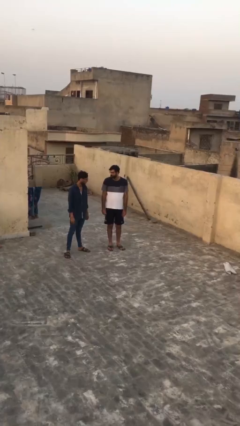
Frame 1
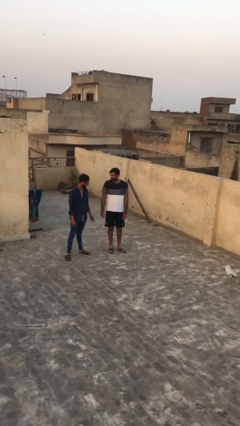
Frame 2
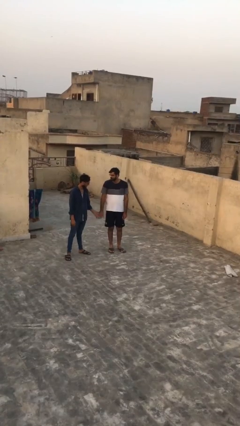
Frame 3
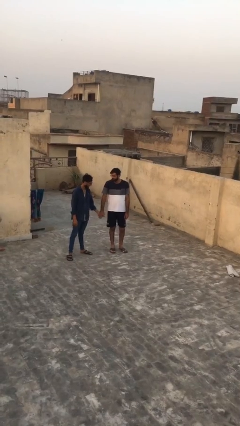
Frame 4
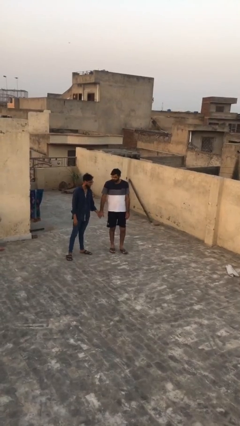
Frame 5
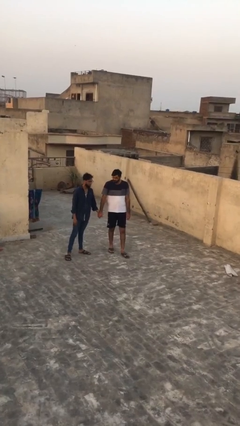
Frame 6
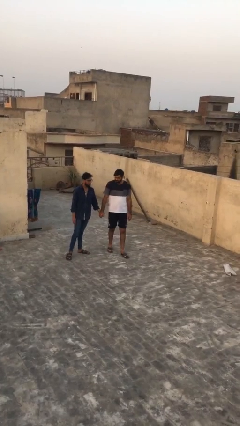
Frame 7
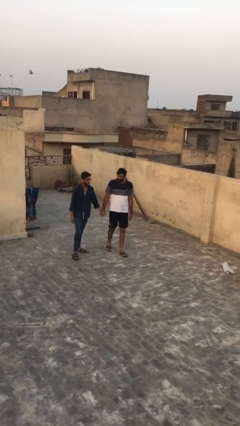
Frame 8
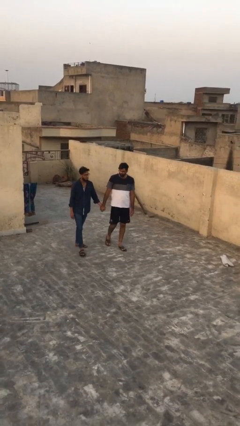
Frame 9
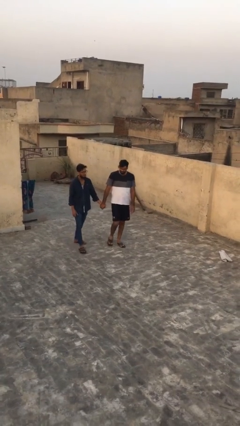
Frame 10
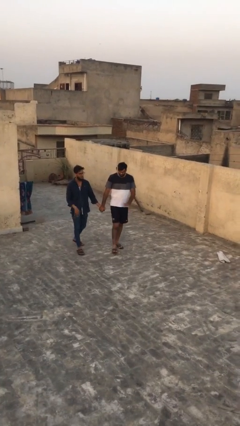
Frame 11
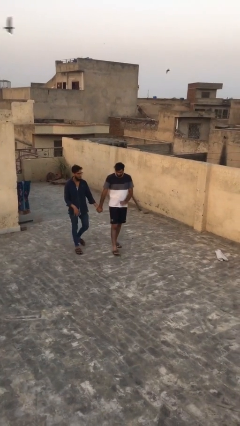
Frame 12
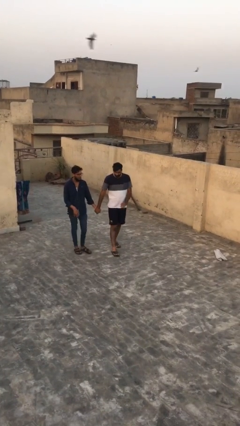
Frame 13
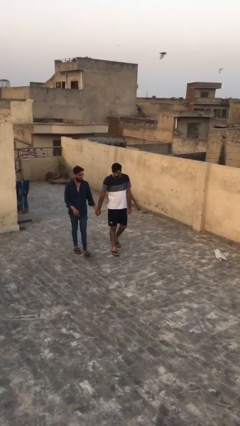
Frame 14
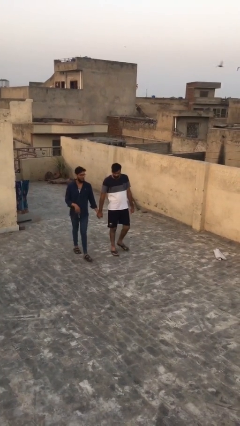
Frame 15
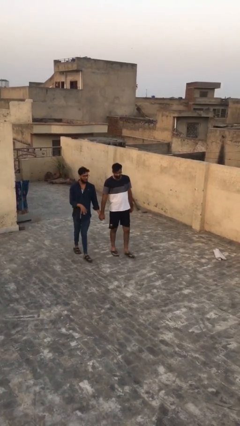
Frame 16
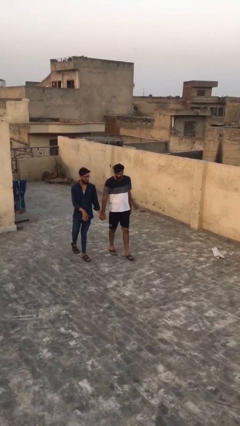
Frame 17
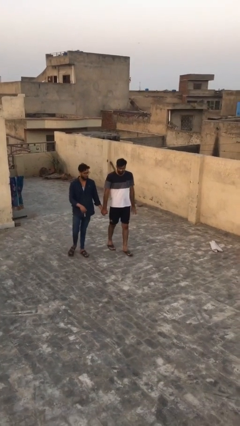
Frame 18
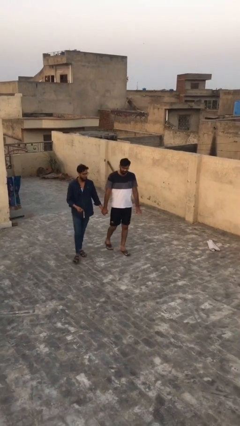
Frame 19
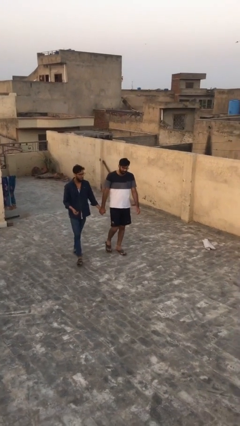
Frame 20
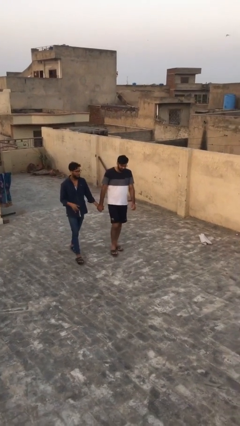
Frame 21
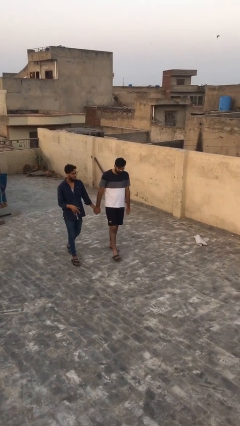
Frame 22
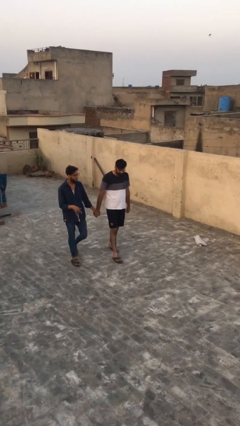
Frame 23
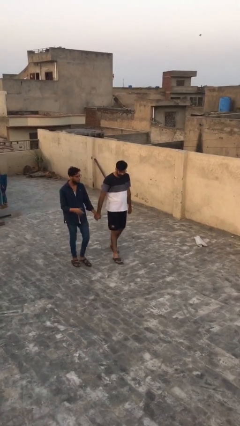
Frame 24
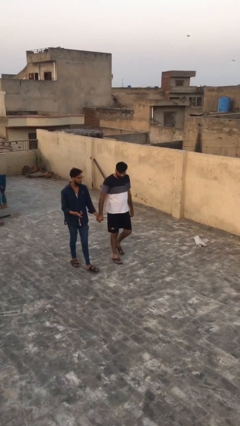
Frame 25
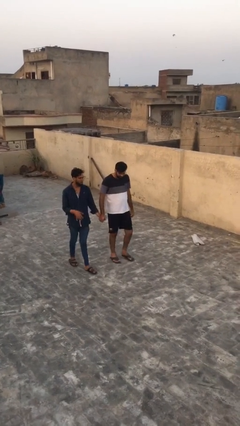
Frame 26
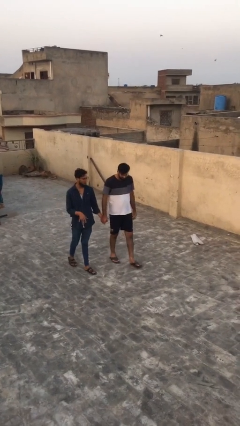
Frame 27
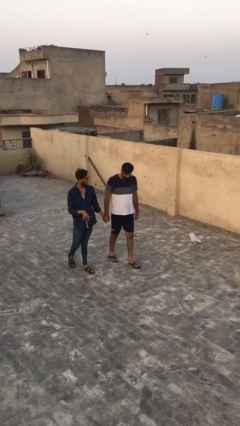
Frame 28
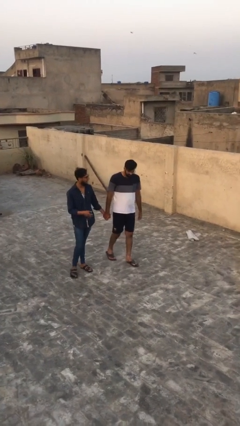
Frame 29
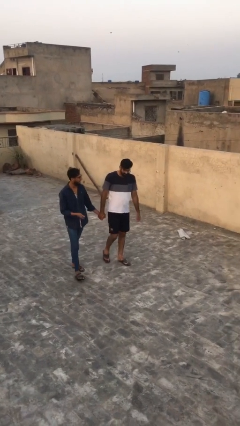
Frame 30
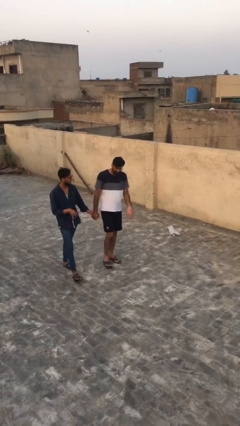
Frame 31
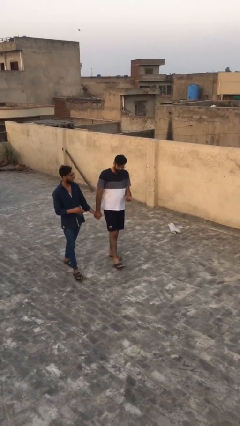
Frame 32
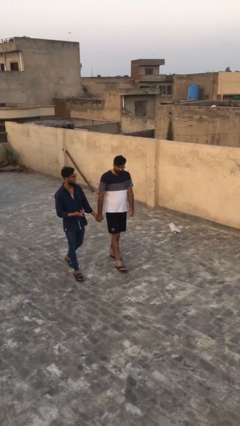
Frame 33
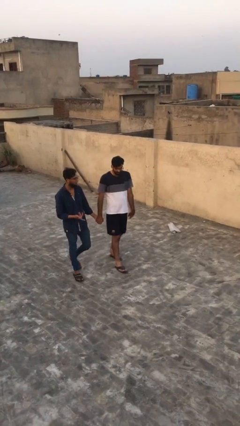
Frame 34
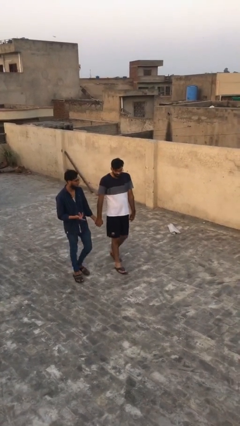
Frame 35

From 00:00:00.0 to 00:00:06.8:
person holds hand

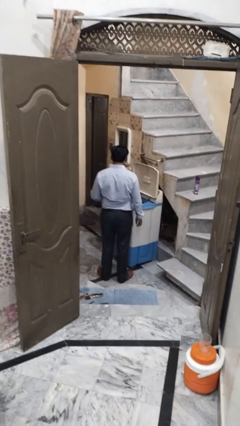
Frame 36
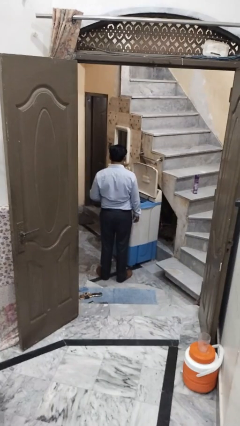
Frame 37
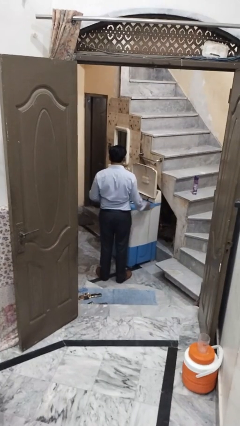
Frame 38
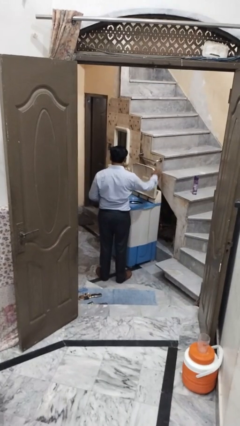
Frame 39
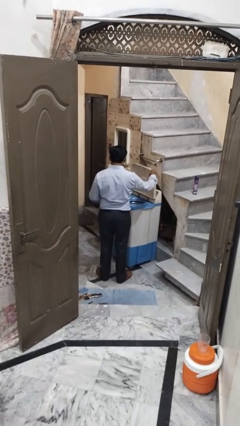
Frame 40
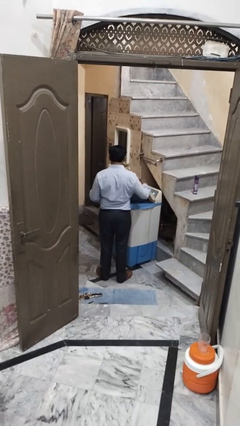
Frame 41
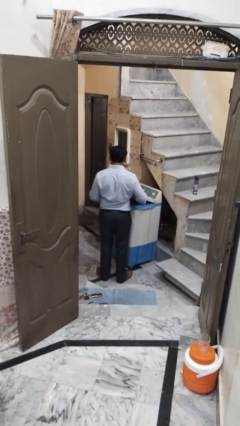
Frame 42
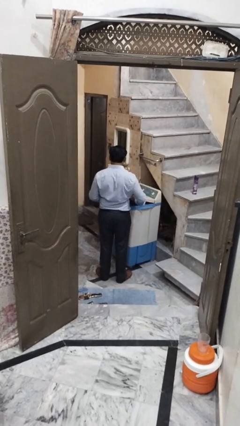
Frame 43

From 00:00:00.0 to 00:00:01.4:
person closes clothes washer

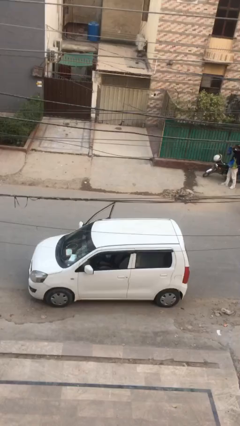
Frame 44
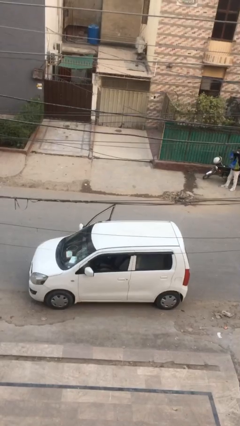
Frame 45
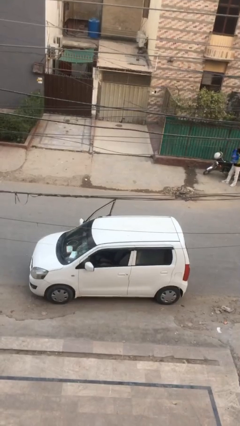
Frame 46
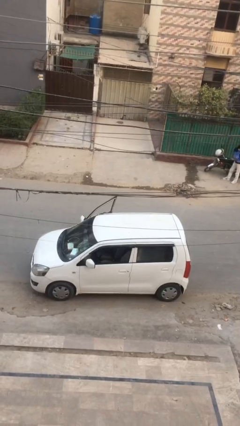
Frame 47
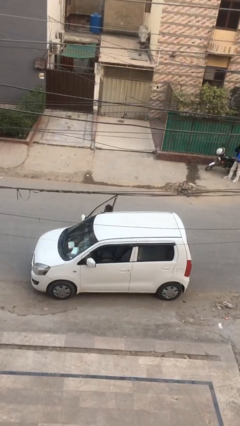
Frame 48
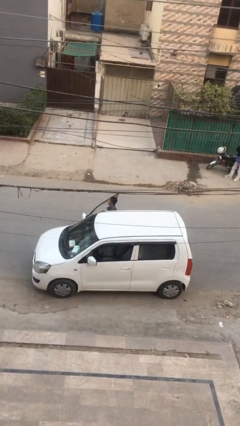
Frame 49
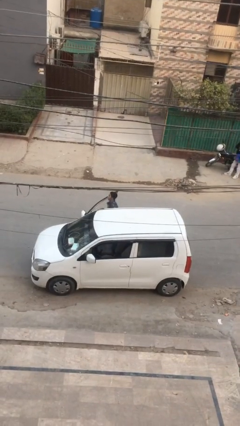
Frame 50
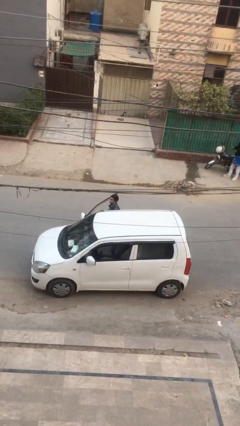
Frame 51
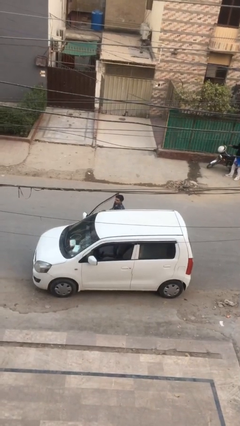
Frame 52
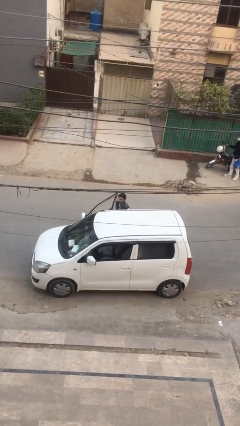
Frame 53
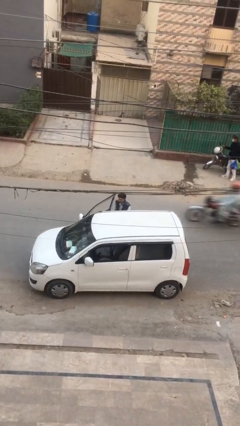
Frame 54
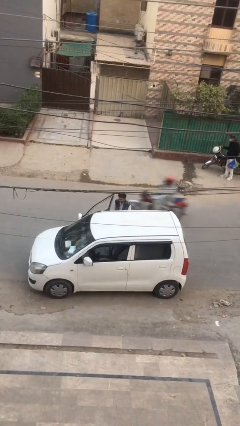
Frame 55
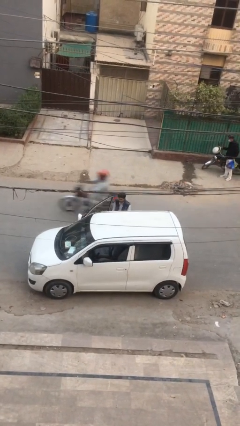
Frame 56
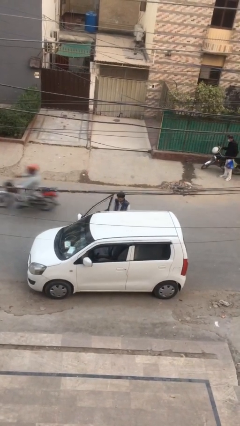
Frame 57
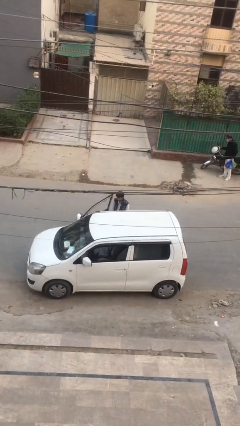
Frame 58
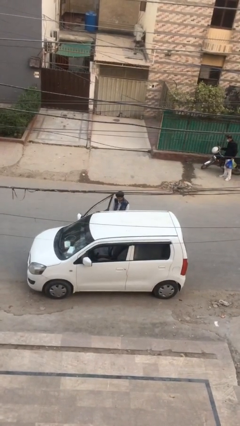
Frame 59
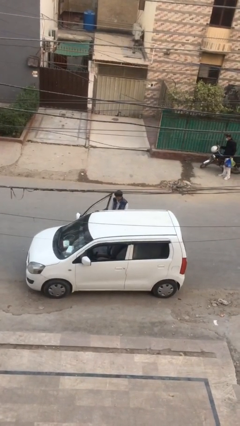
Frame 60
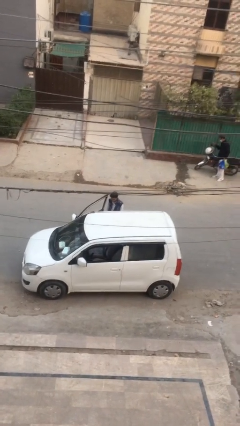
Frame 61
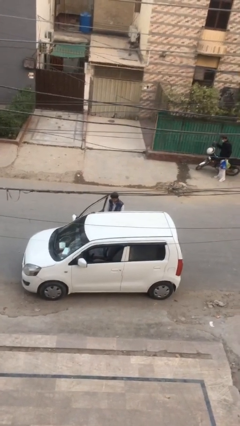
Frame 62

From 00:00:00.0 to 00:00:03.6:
person exits car

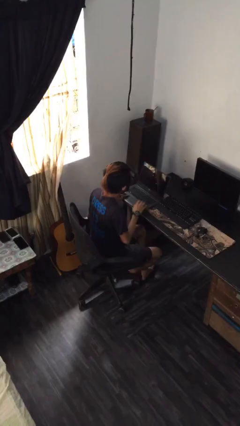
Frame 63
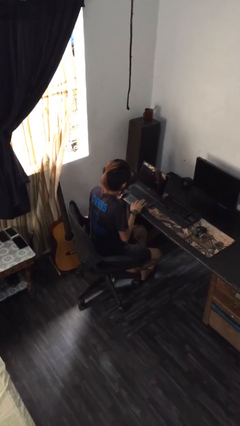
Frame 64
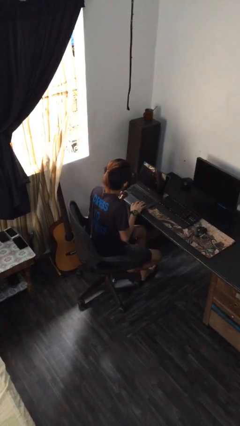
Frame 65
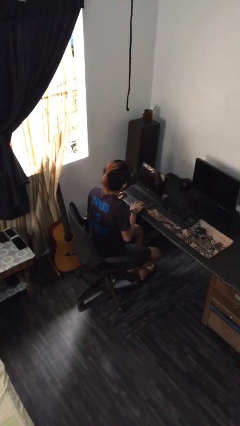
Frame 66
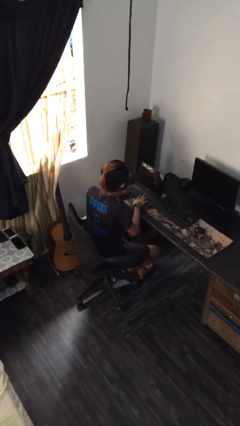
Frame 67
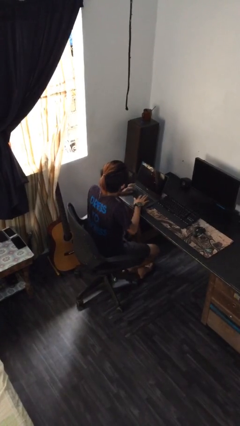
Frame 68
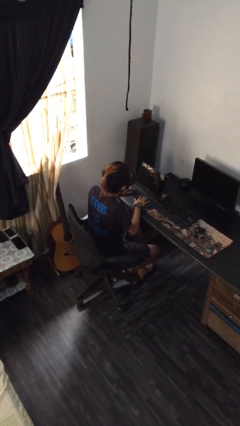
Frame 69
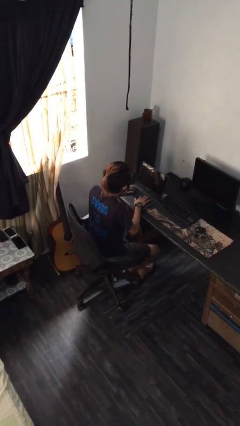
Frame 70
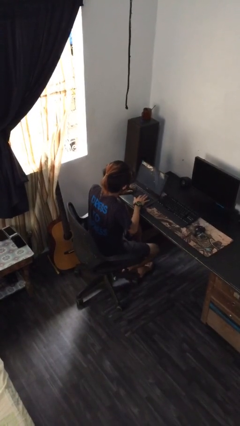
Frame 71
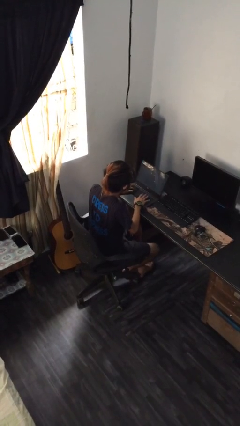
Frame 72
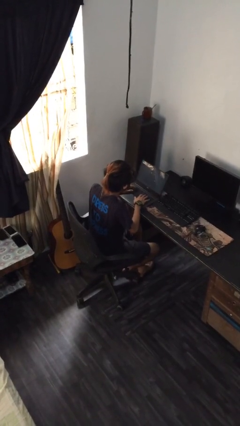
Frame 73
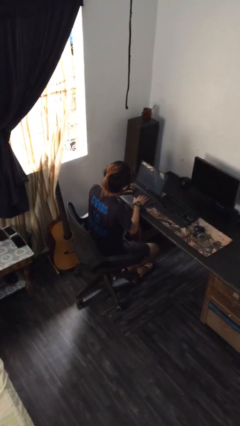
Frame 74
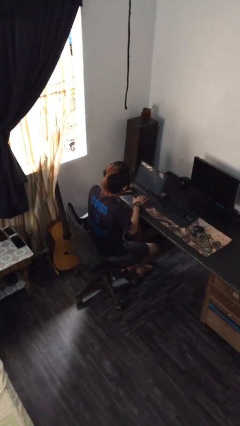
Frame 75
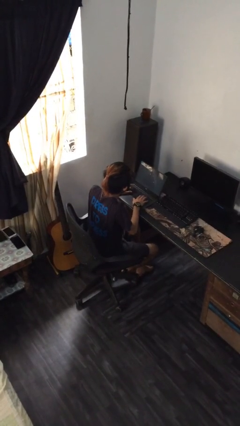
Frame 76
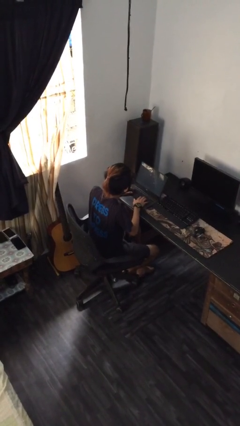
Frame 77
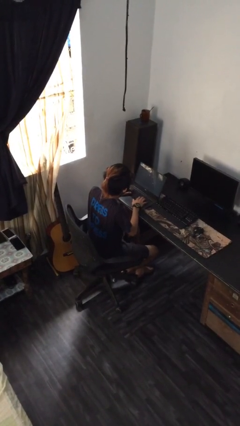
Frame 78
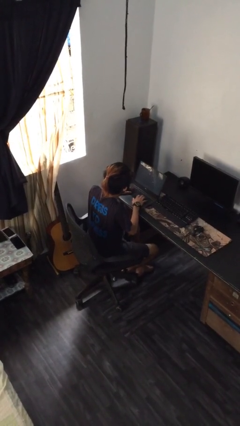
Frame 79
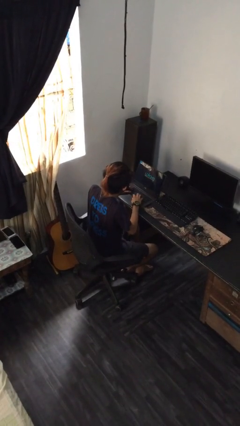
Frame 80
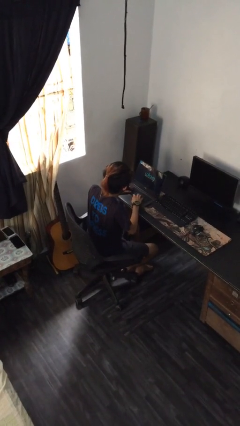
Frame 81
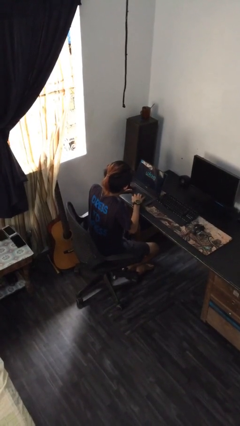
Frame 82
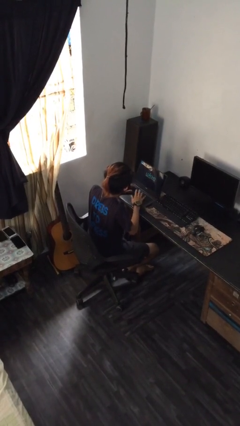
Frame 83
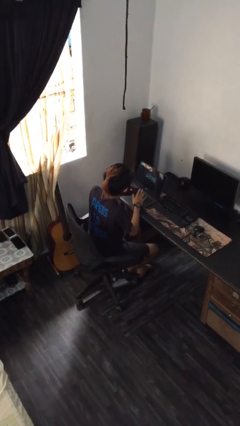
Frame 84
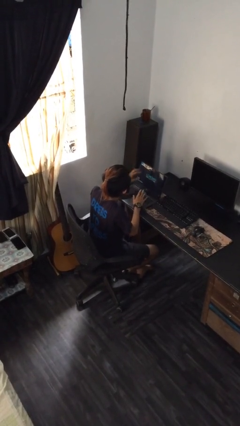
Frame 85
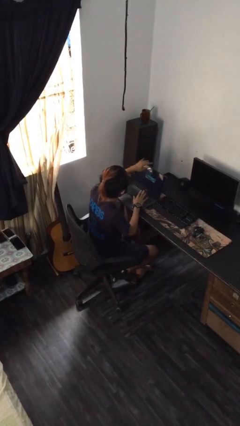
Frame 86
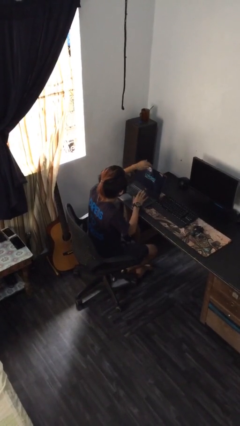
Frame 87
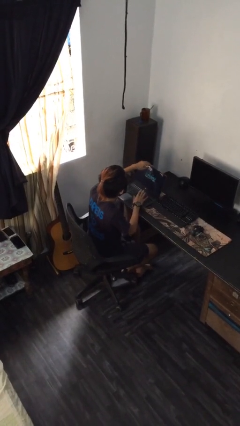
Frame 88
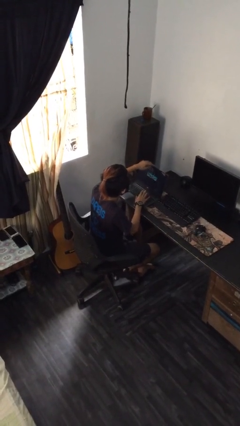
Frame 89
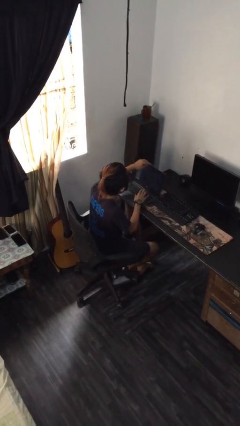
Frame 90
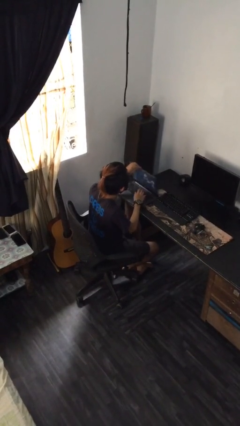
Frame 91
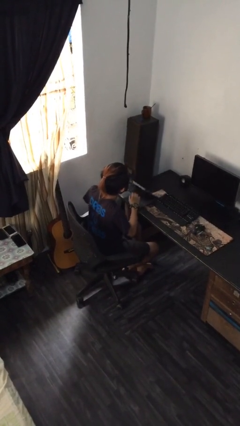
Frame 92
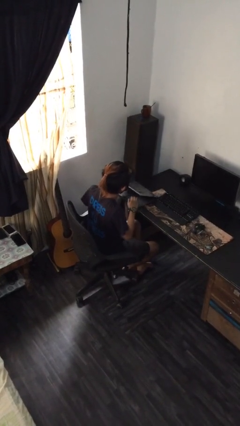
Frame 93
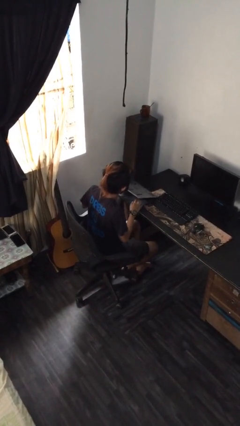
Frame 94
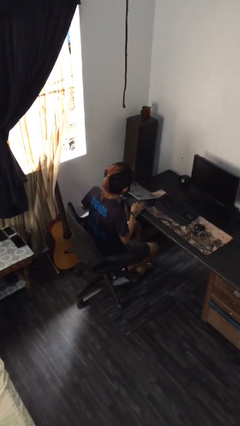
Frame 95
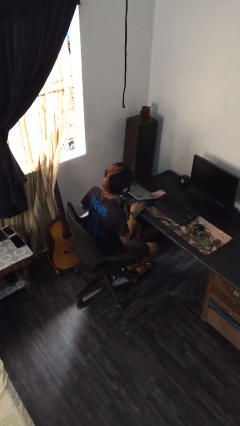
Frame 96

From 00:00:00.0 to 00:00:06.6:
person interacts with laptop
